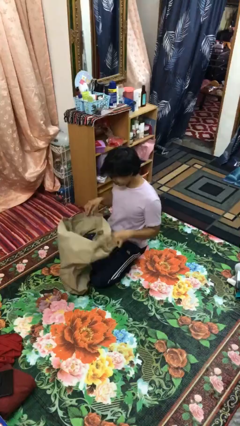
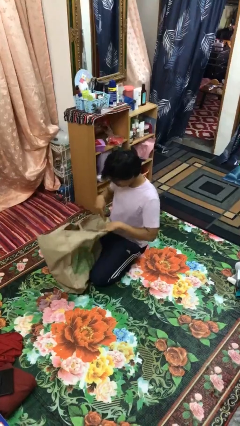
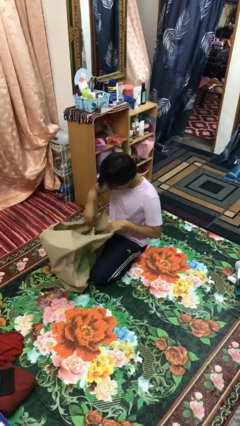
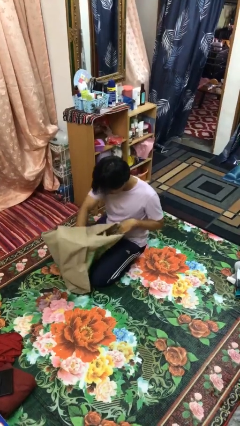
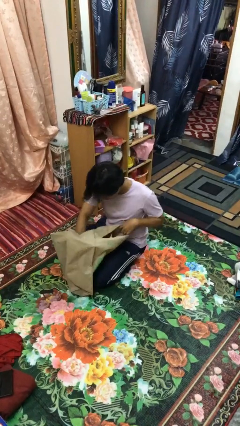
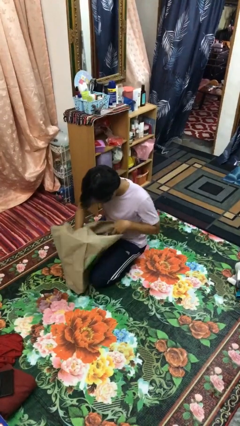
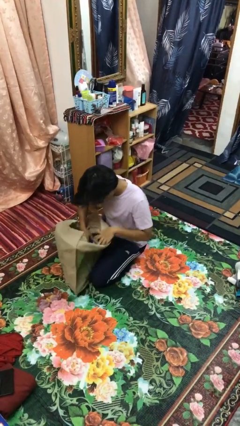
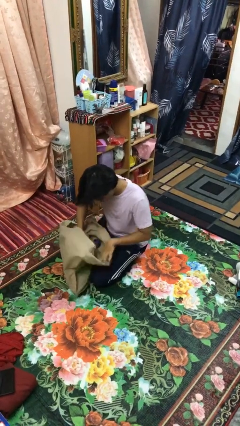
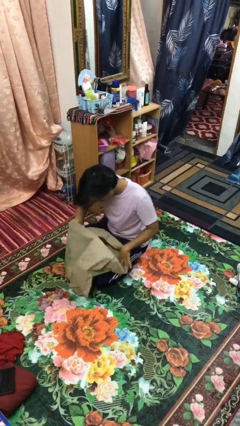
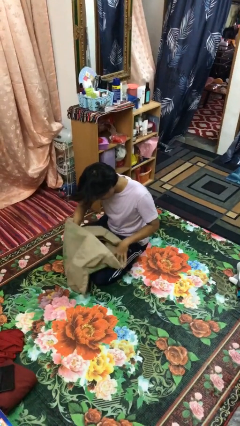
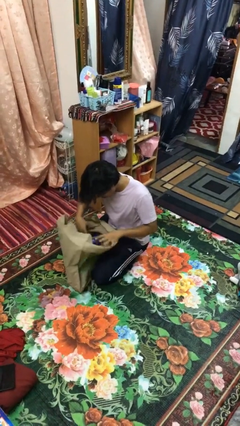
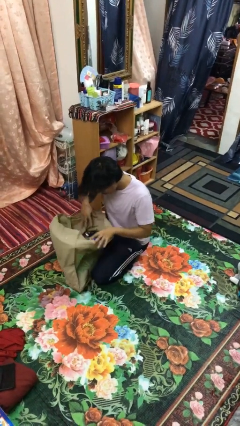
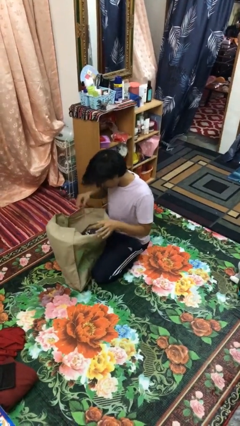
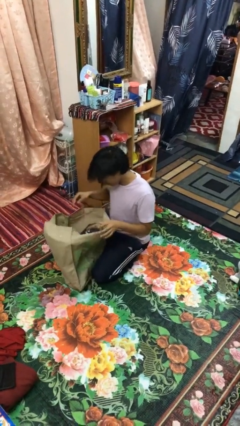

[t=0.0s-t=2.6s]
person searches in bag

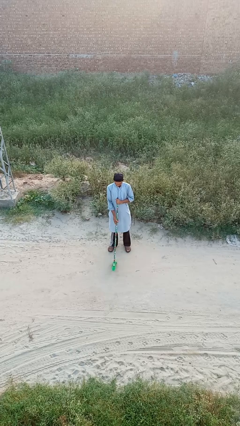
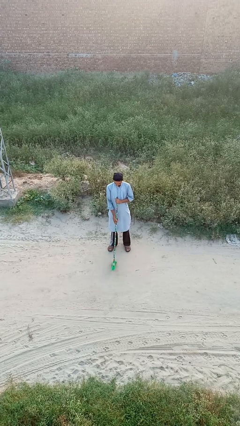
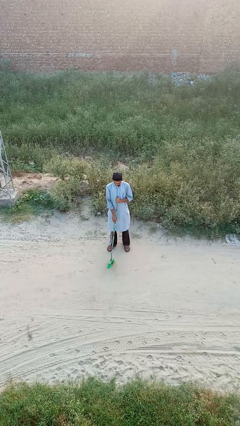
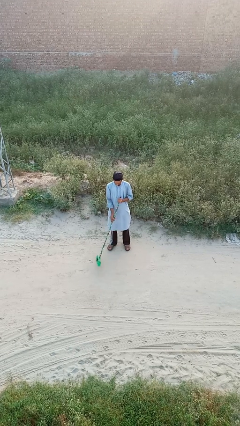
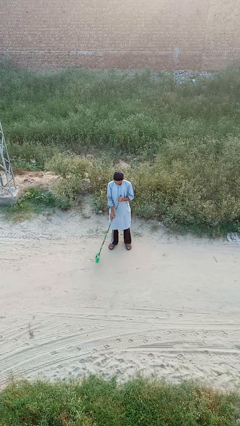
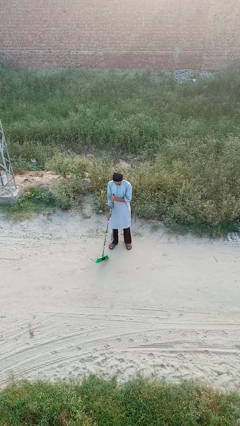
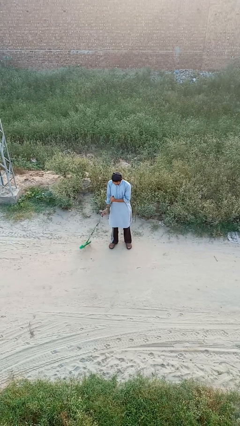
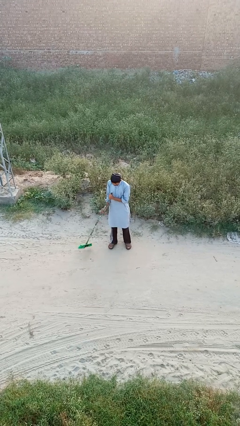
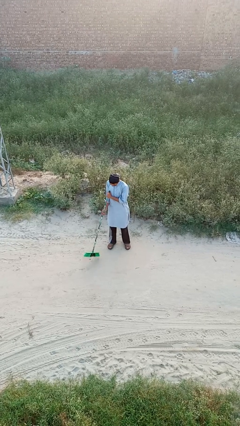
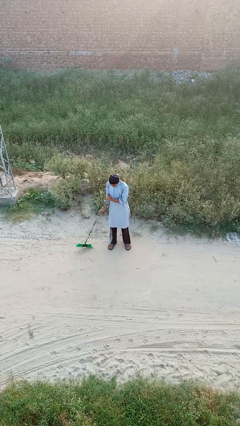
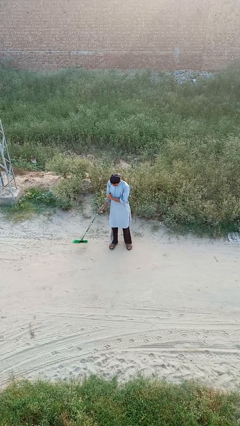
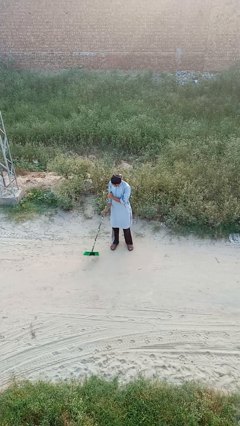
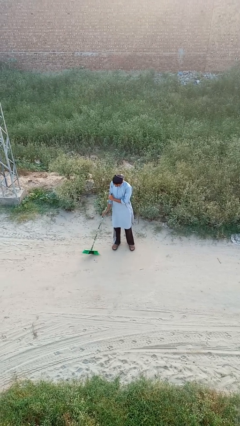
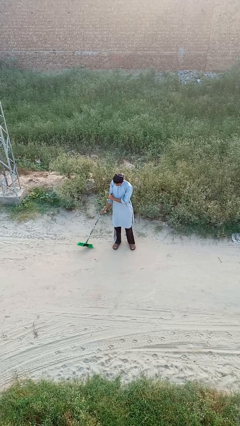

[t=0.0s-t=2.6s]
person sweeps floor

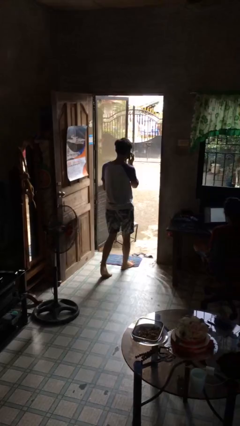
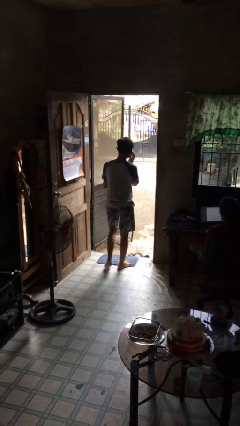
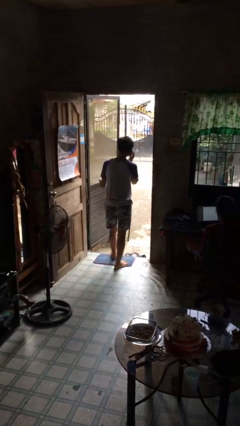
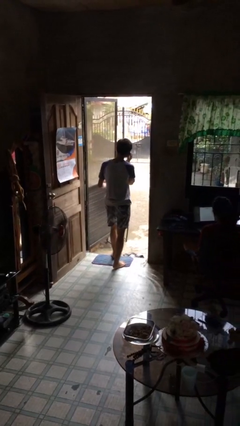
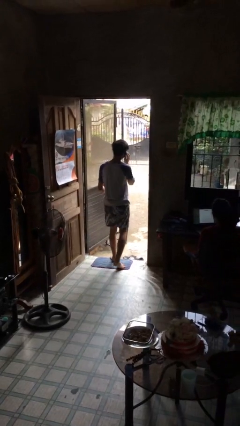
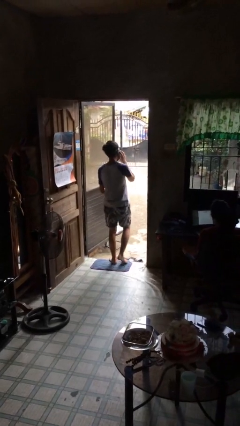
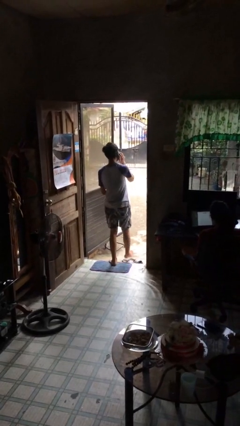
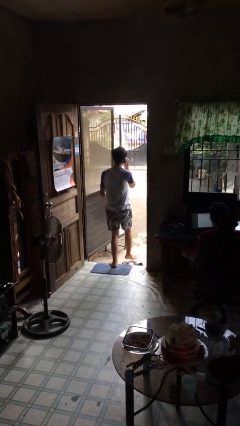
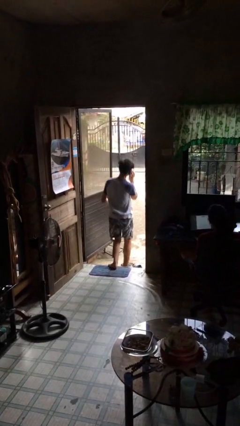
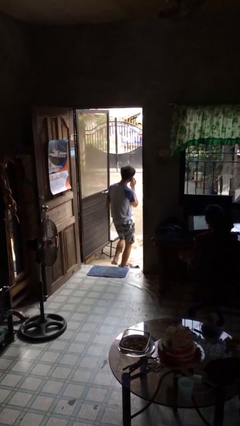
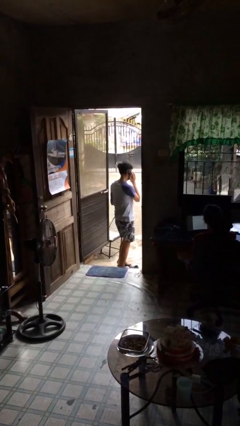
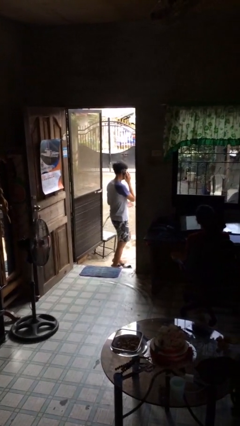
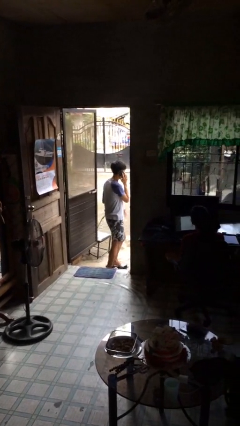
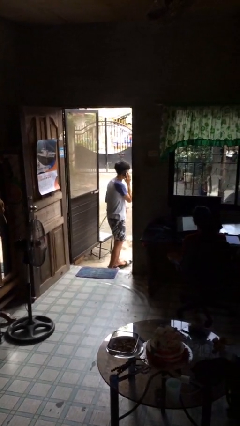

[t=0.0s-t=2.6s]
person exits scene through structure

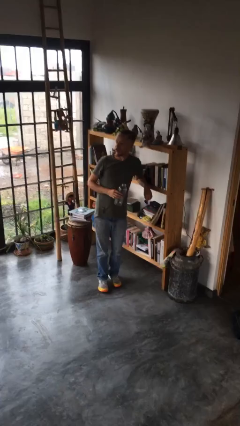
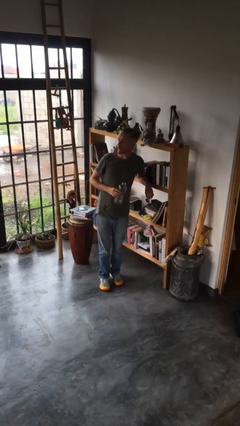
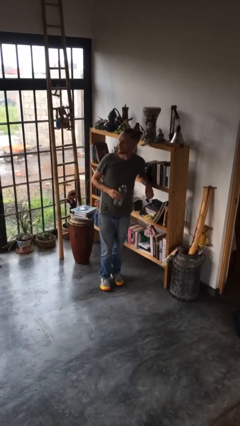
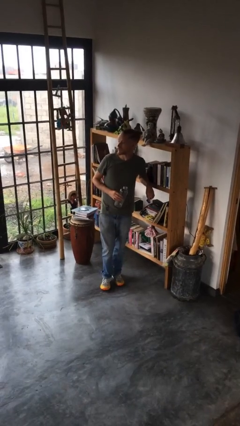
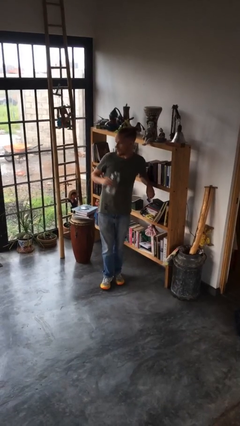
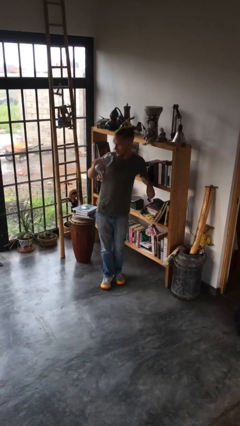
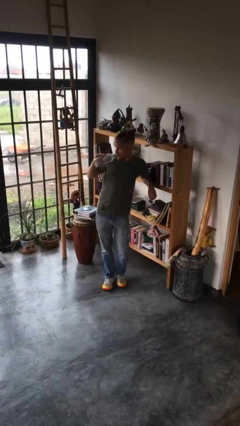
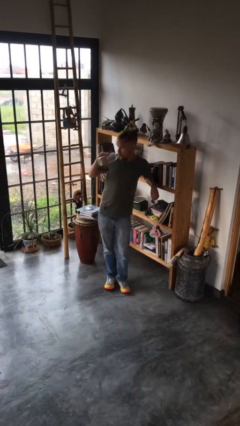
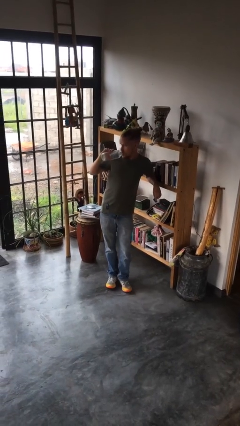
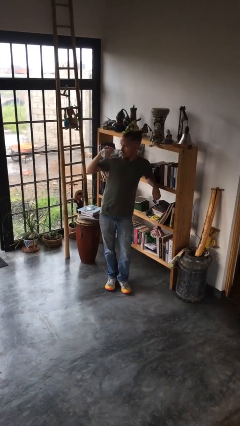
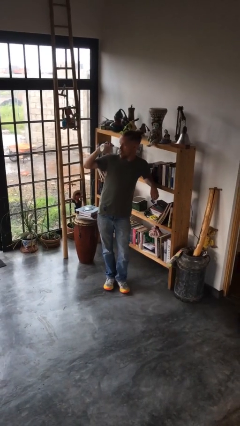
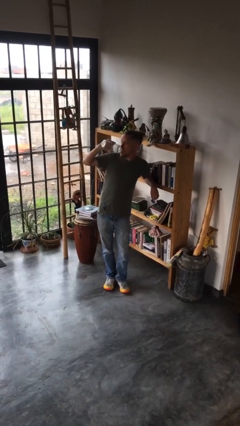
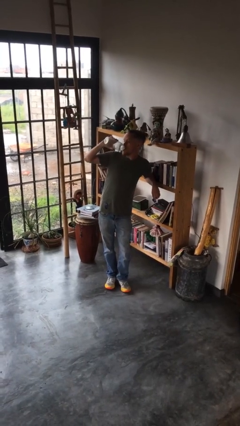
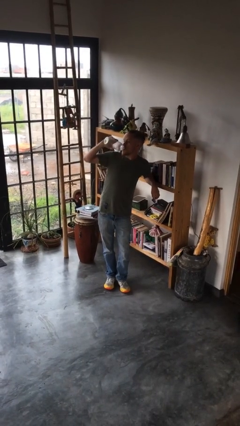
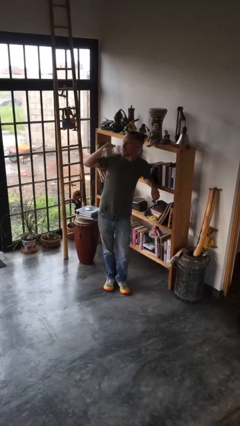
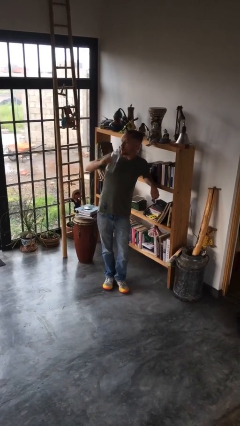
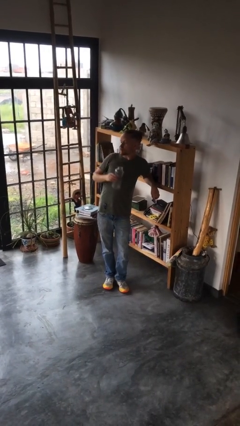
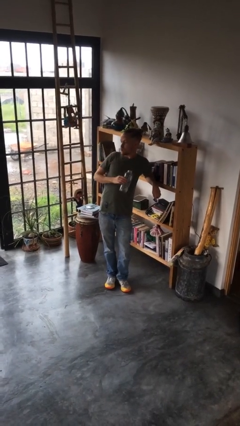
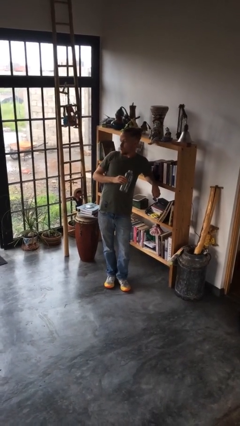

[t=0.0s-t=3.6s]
person drinks from bottle

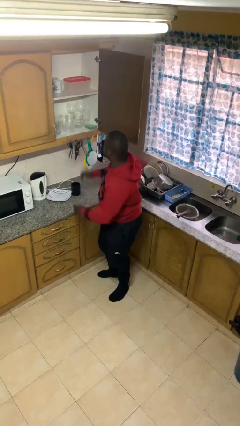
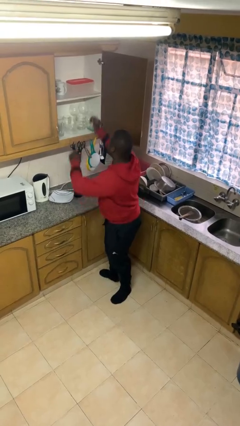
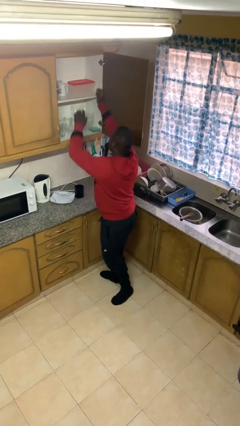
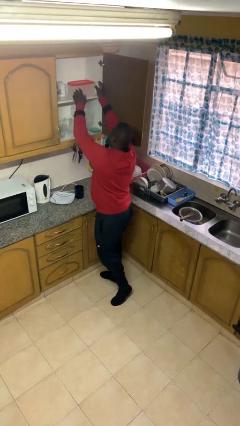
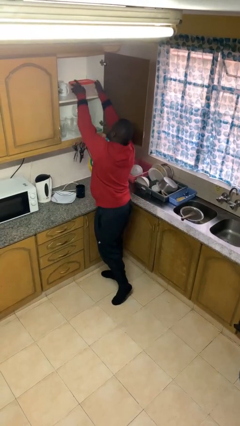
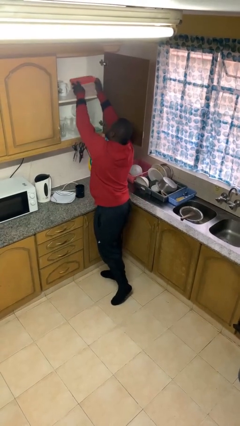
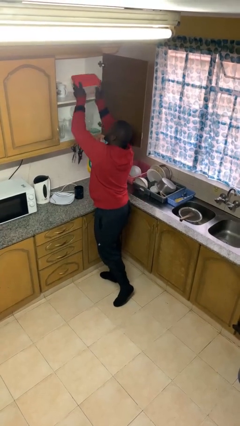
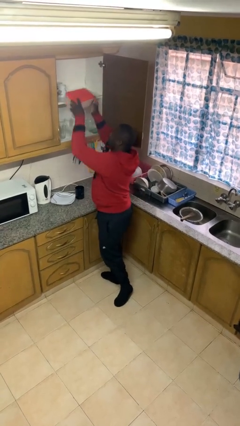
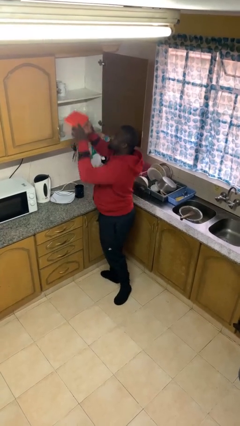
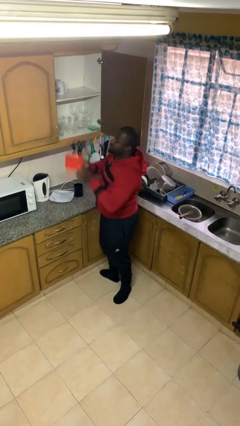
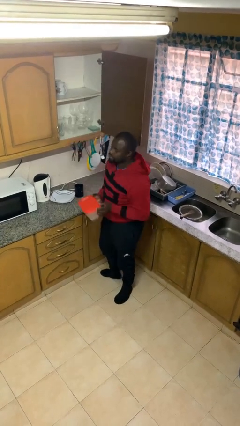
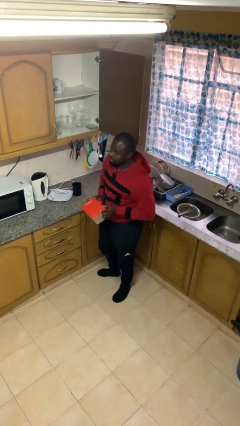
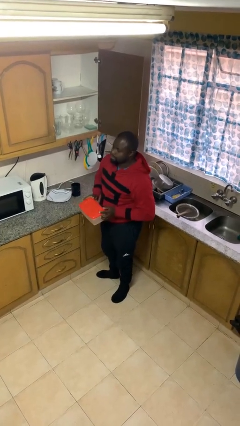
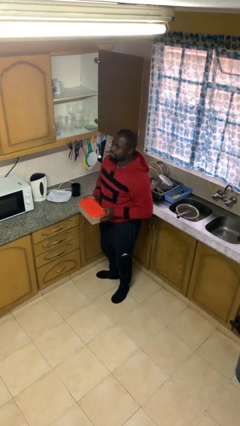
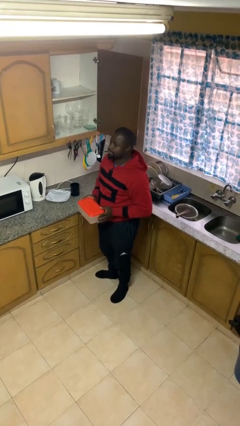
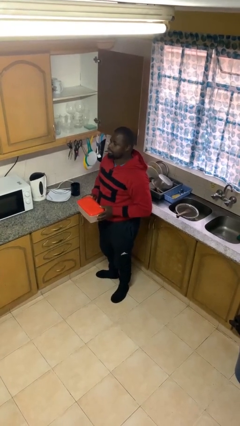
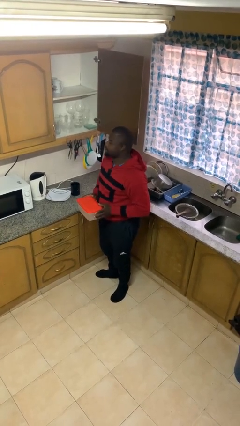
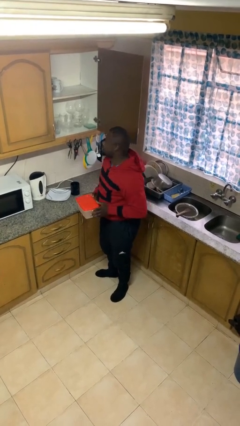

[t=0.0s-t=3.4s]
person picks up object from cabinet

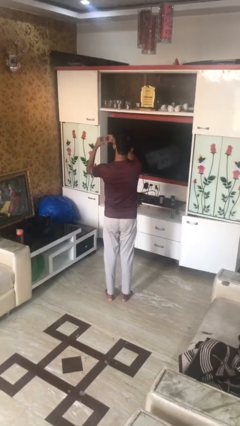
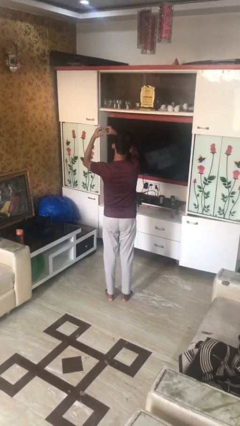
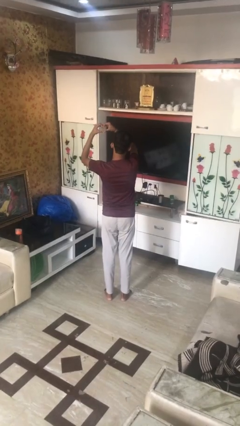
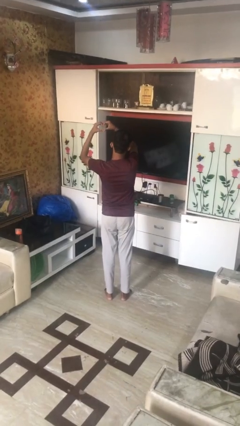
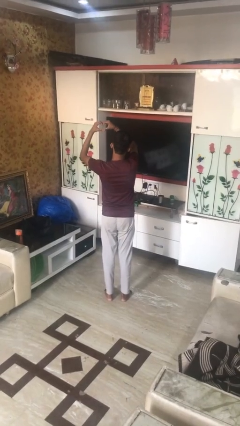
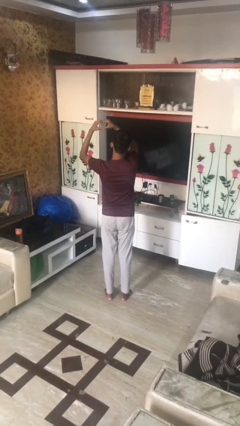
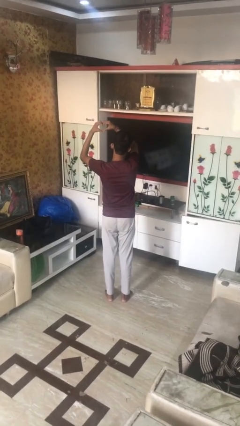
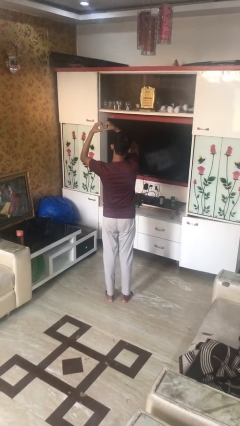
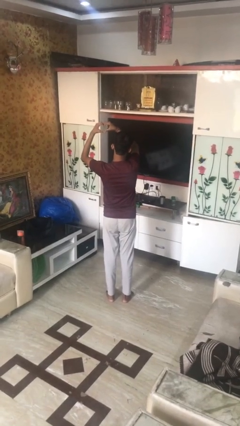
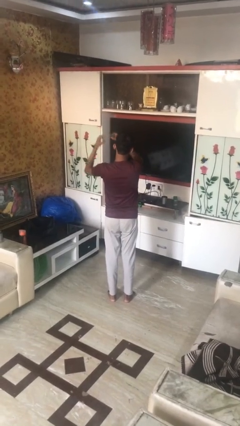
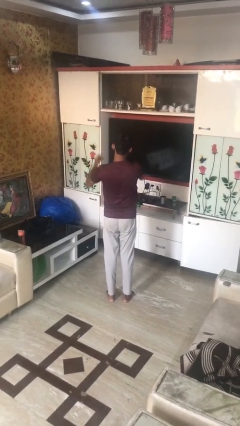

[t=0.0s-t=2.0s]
person gestures heart

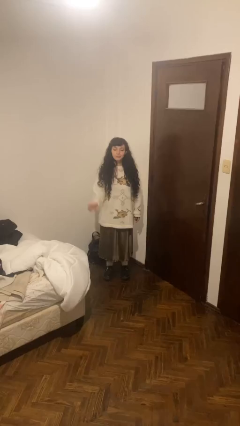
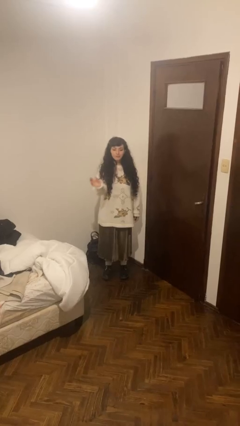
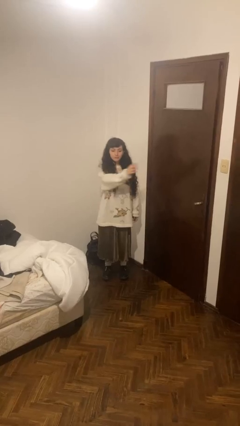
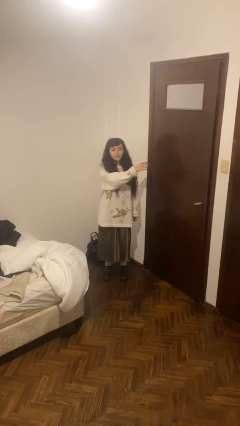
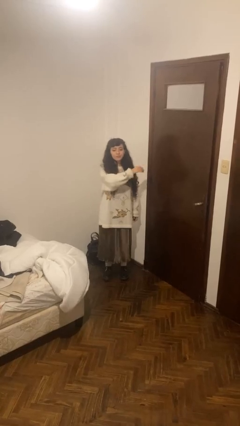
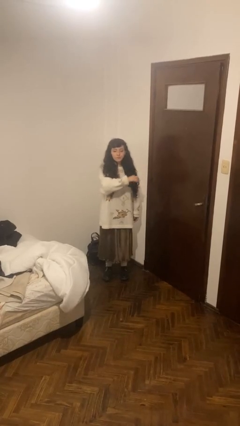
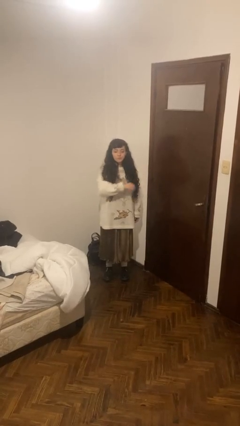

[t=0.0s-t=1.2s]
person gestures swipe left
